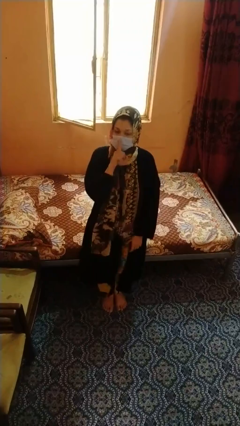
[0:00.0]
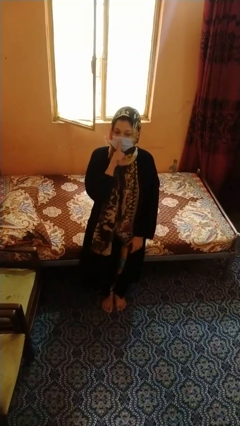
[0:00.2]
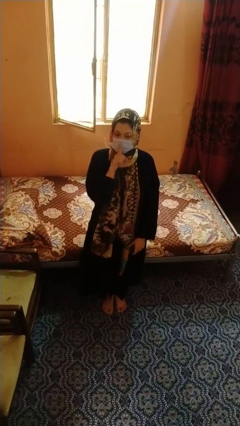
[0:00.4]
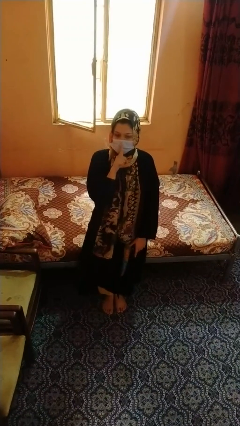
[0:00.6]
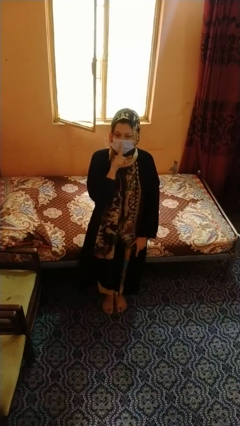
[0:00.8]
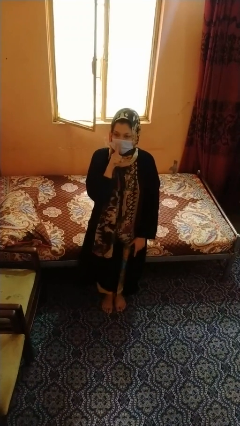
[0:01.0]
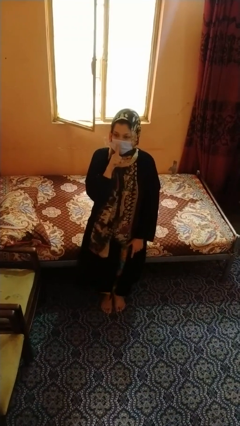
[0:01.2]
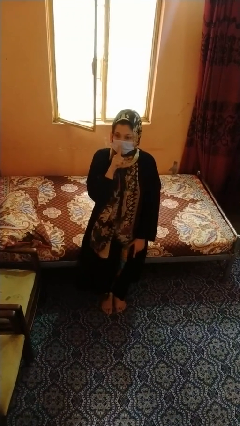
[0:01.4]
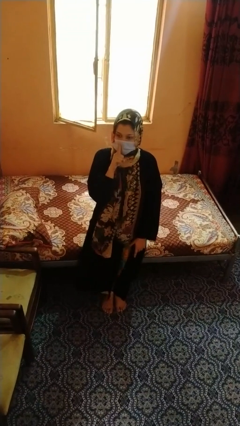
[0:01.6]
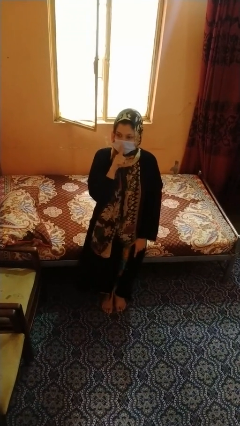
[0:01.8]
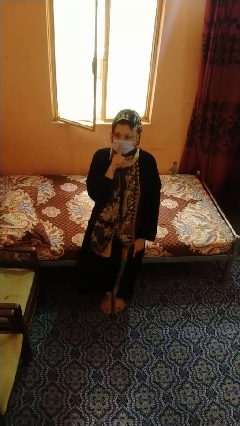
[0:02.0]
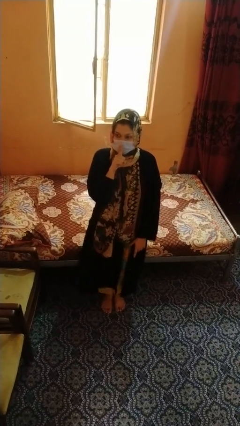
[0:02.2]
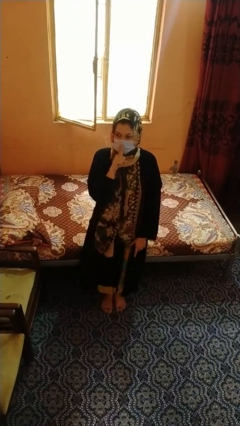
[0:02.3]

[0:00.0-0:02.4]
person gestures be quiet

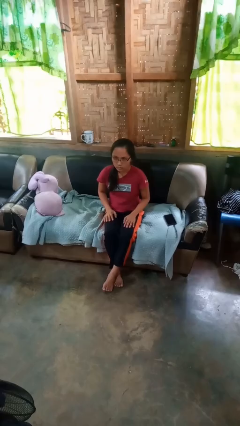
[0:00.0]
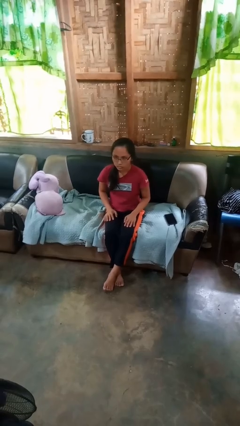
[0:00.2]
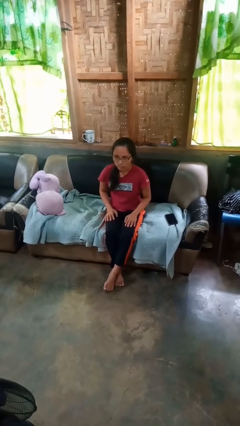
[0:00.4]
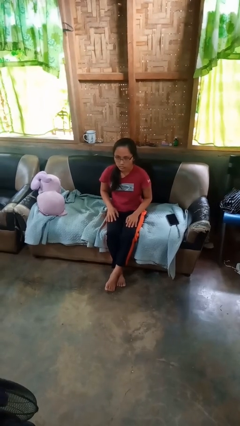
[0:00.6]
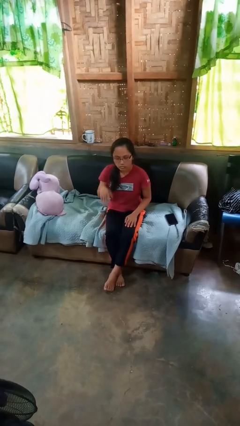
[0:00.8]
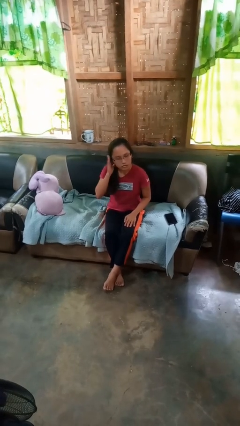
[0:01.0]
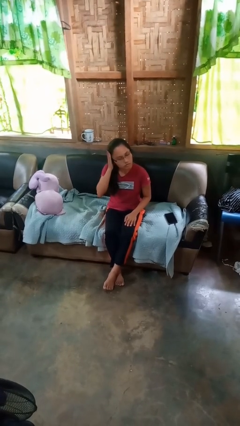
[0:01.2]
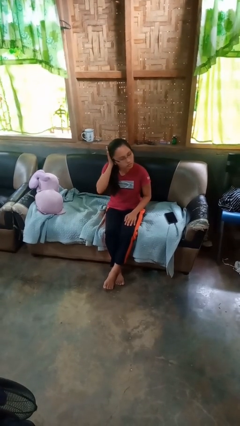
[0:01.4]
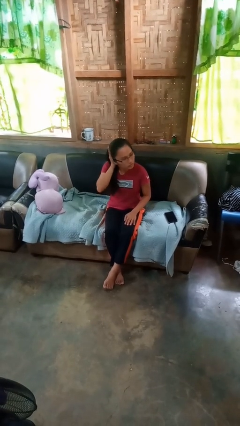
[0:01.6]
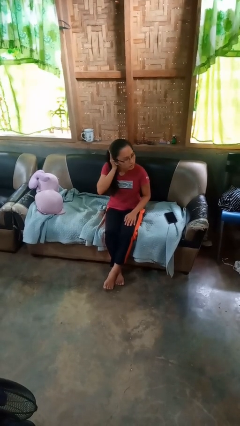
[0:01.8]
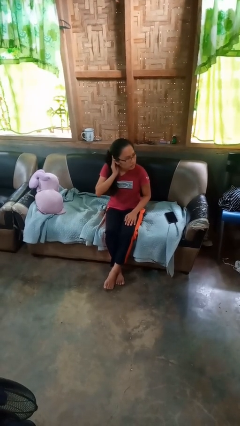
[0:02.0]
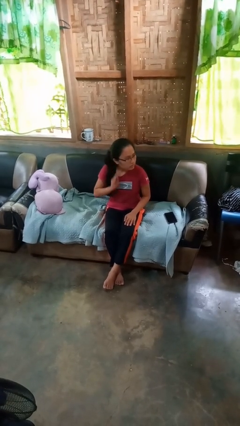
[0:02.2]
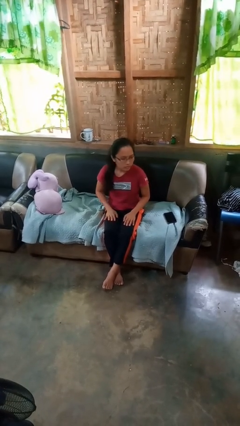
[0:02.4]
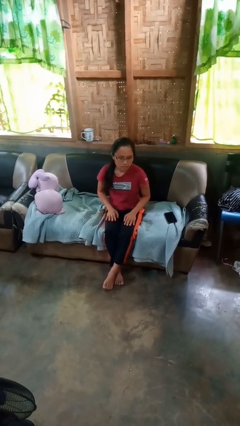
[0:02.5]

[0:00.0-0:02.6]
person strokes hair

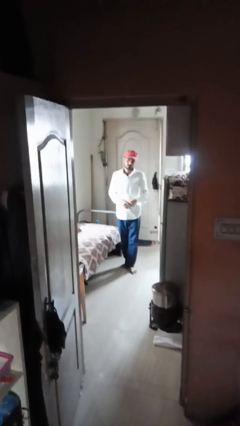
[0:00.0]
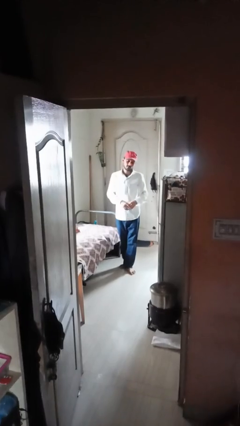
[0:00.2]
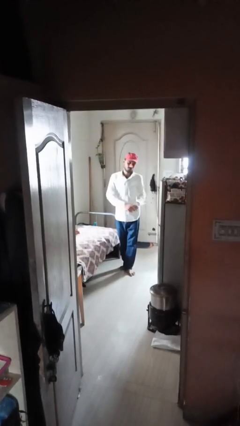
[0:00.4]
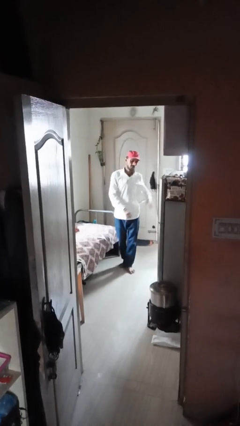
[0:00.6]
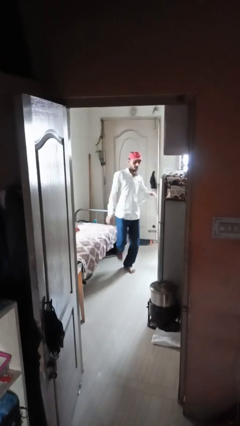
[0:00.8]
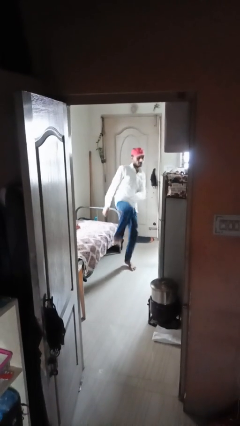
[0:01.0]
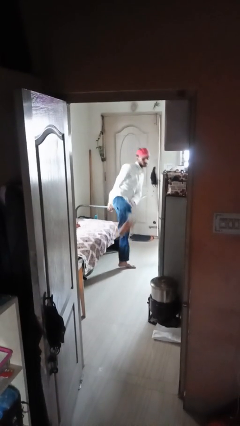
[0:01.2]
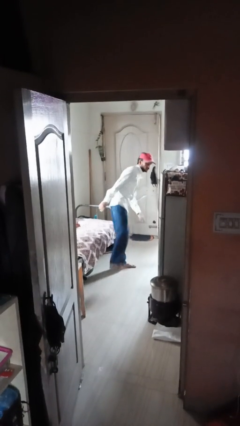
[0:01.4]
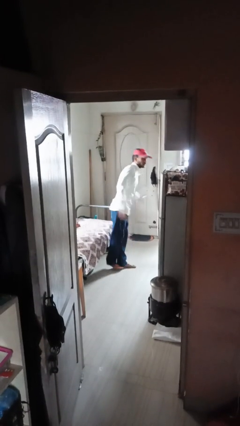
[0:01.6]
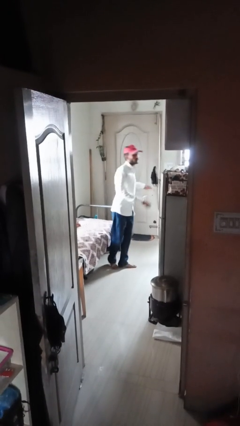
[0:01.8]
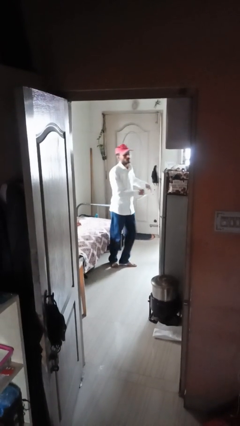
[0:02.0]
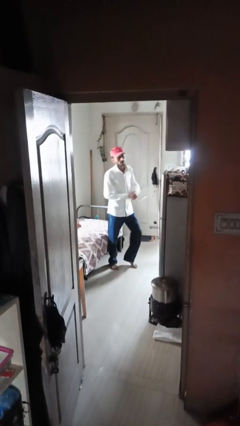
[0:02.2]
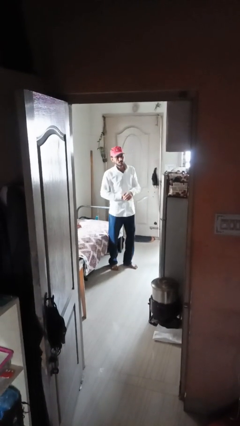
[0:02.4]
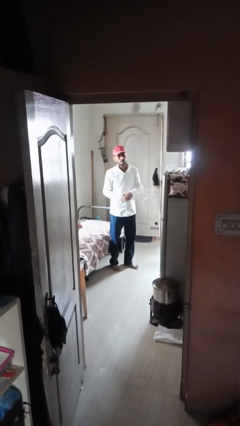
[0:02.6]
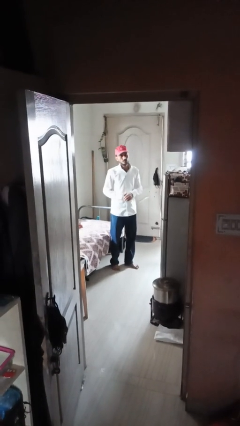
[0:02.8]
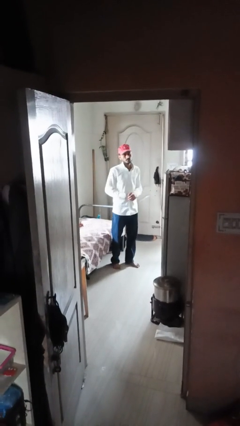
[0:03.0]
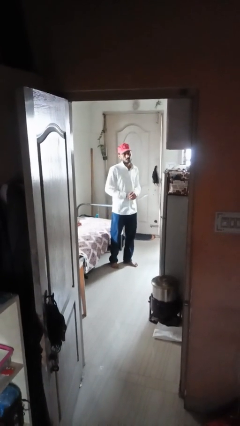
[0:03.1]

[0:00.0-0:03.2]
person karate kicks

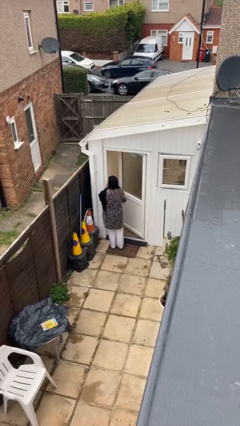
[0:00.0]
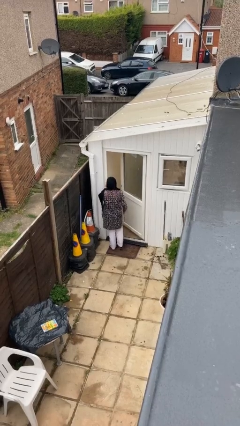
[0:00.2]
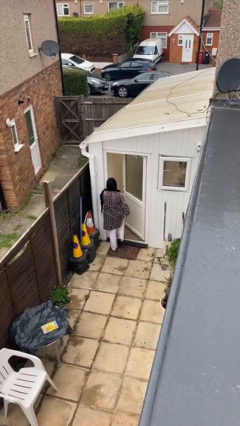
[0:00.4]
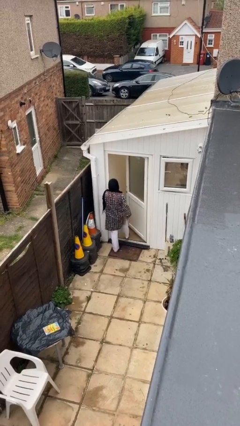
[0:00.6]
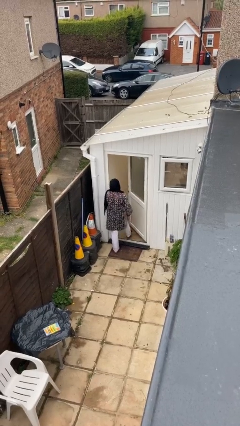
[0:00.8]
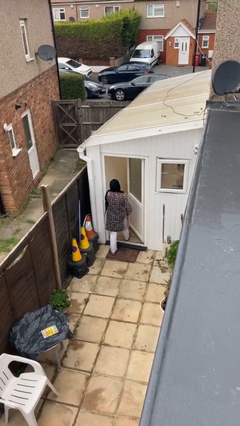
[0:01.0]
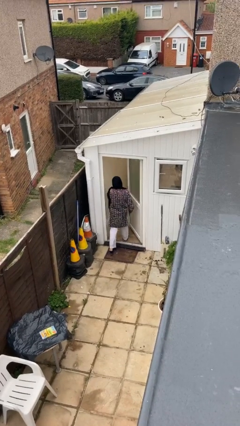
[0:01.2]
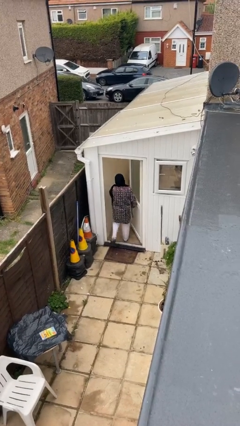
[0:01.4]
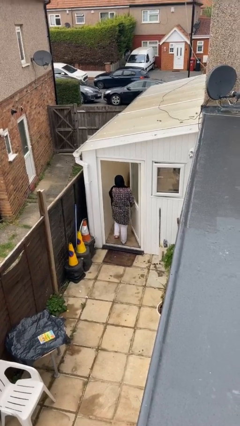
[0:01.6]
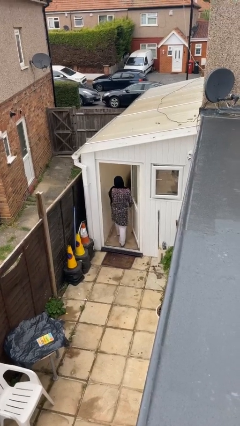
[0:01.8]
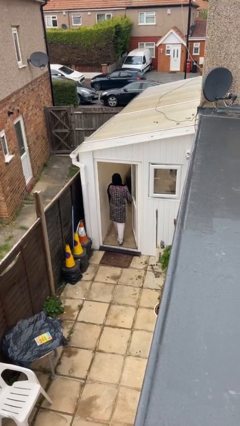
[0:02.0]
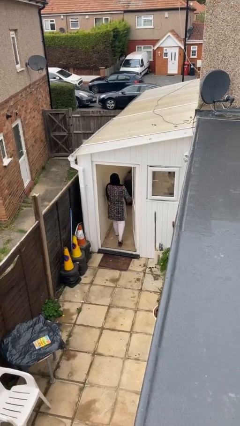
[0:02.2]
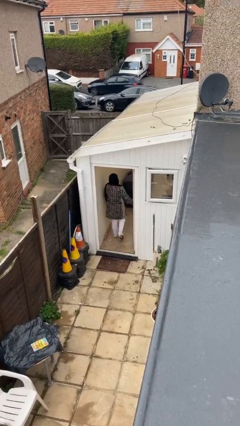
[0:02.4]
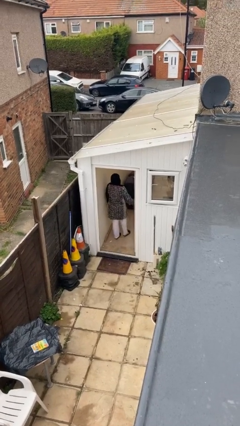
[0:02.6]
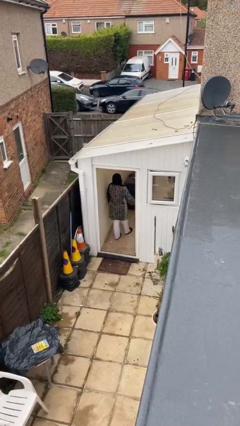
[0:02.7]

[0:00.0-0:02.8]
person exits scene through structure

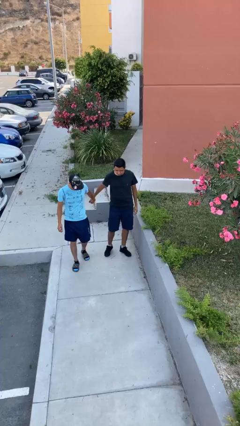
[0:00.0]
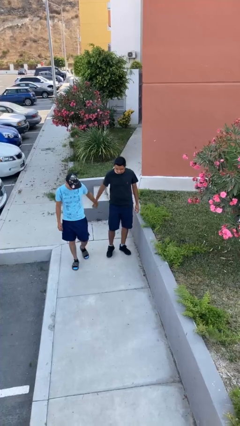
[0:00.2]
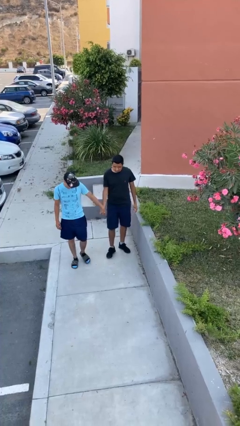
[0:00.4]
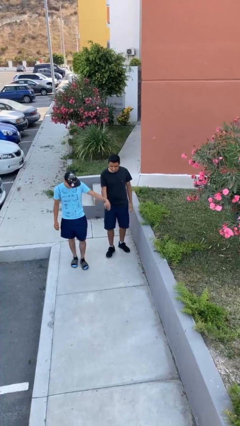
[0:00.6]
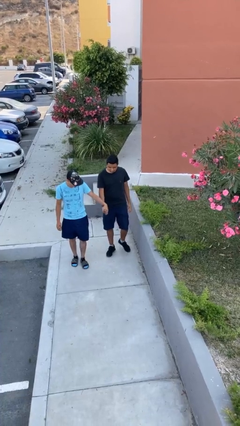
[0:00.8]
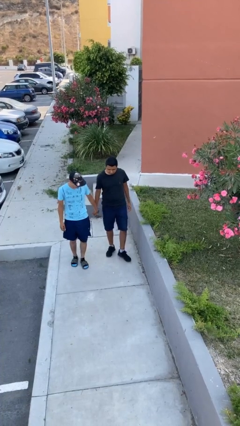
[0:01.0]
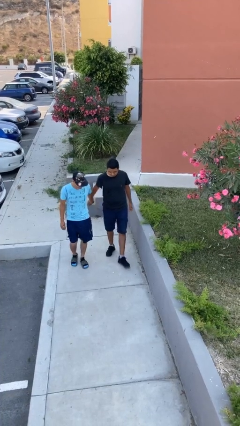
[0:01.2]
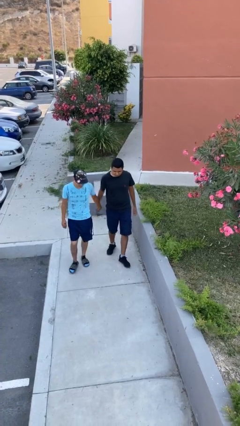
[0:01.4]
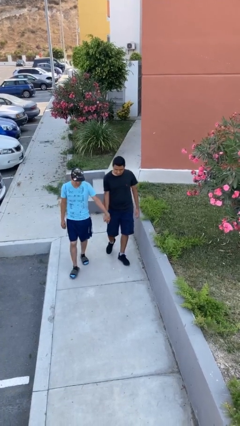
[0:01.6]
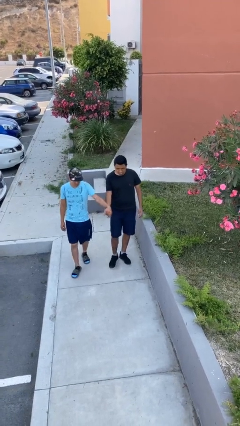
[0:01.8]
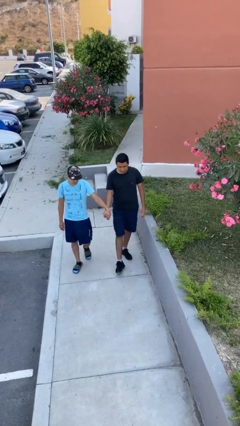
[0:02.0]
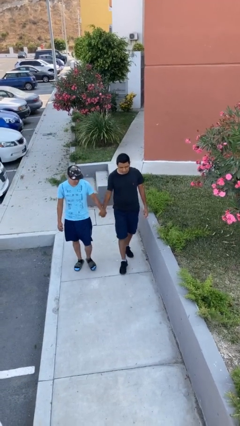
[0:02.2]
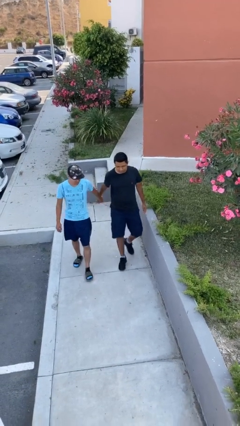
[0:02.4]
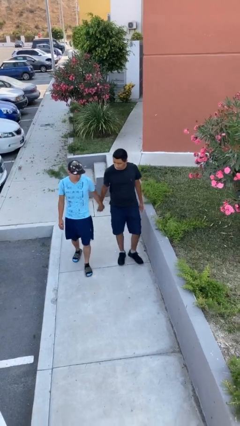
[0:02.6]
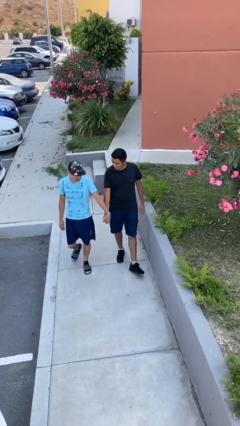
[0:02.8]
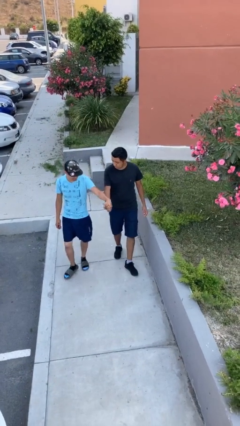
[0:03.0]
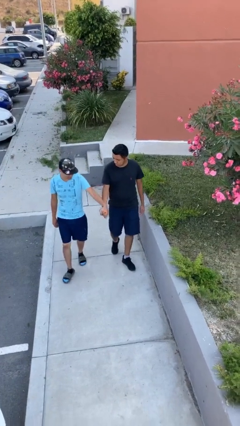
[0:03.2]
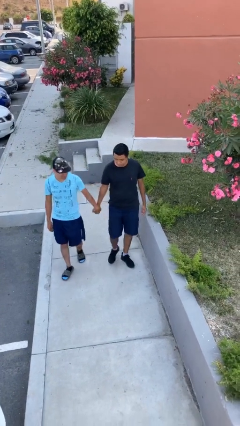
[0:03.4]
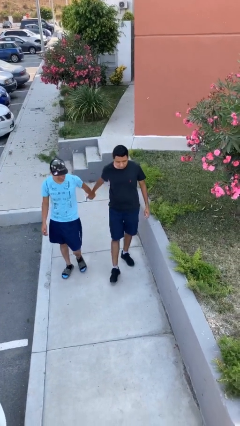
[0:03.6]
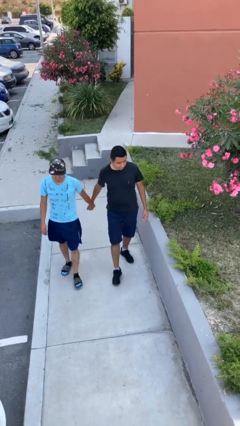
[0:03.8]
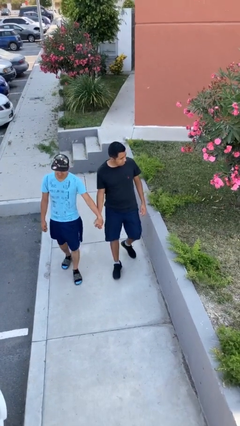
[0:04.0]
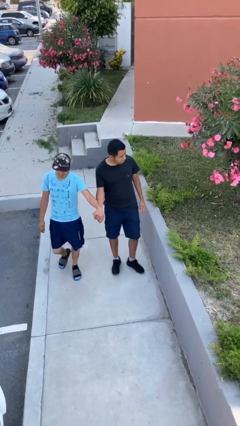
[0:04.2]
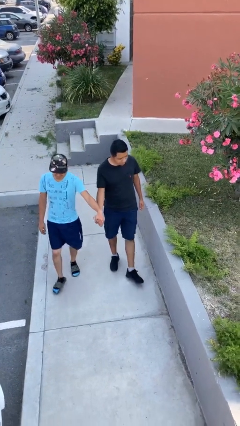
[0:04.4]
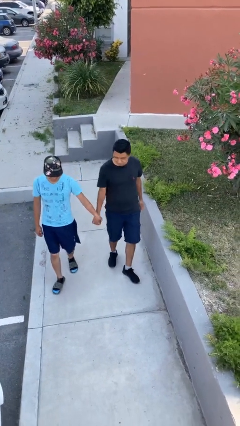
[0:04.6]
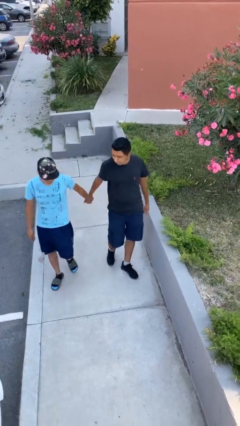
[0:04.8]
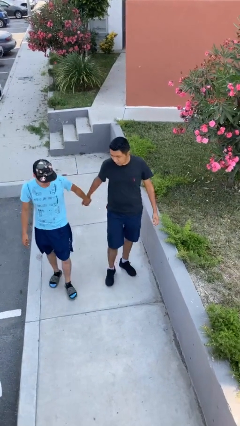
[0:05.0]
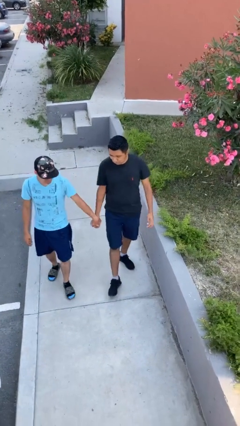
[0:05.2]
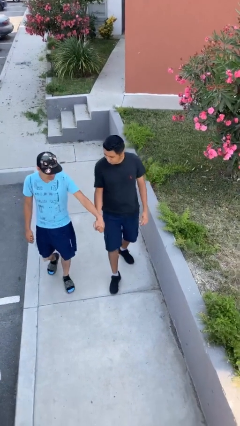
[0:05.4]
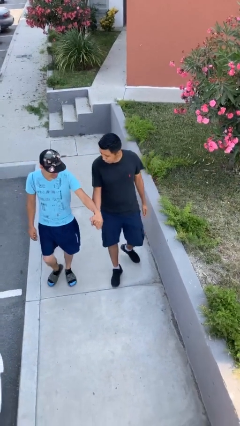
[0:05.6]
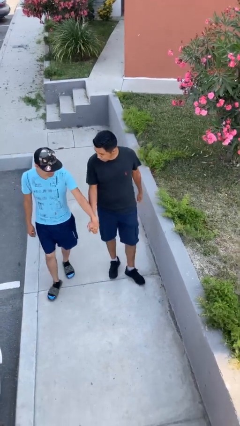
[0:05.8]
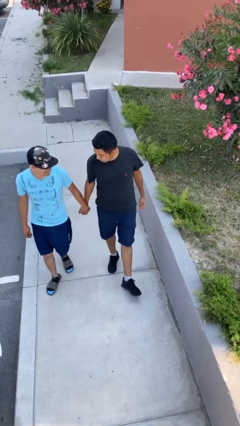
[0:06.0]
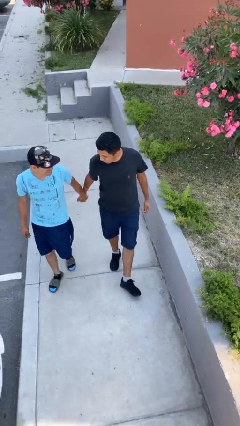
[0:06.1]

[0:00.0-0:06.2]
person holds hand

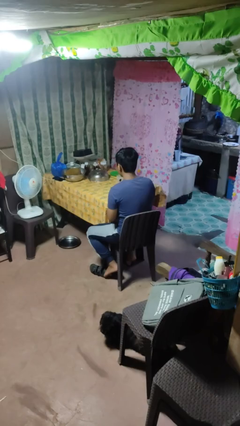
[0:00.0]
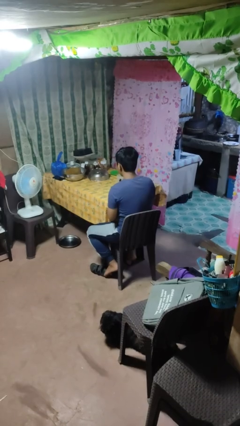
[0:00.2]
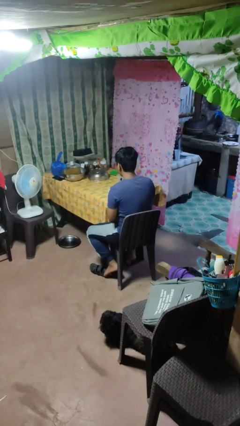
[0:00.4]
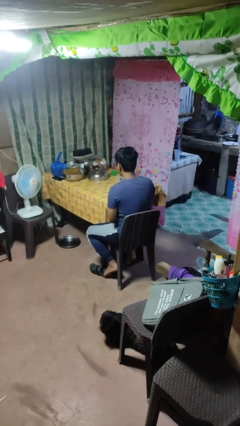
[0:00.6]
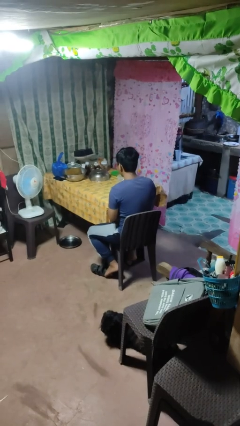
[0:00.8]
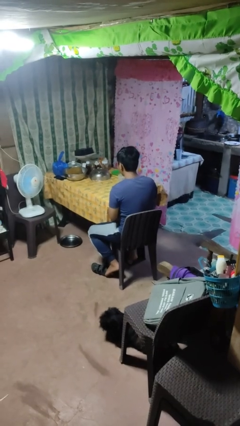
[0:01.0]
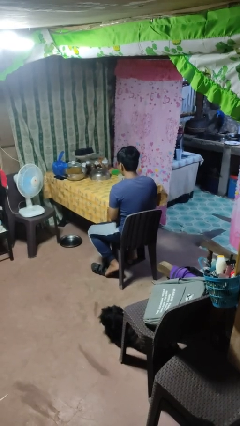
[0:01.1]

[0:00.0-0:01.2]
person stirs mug
